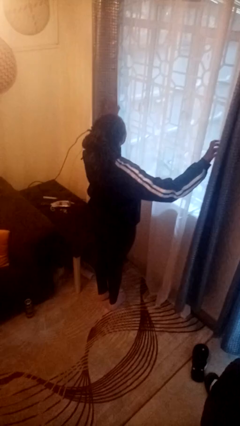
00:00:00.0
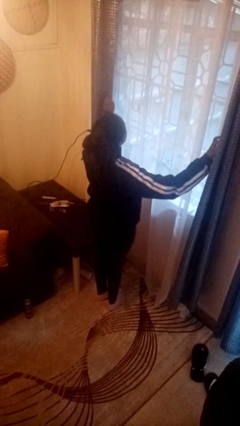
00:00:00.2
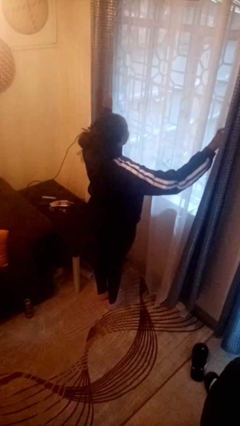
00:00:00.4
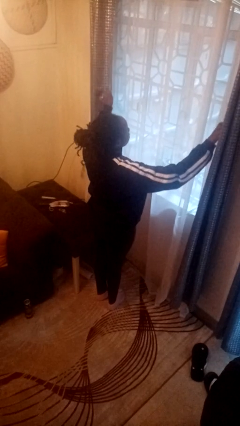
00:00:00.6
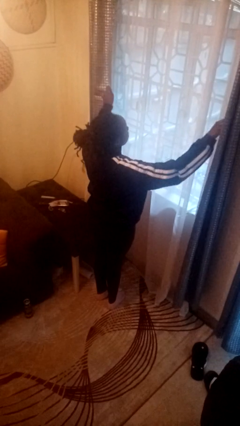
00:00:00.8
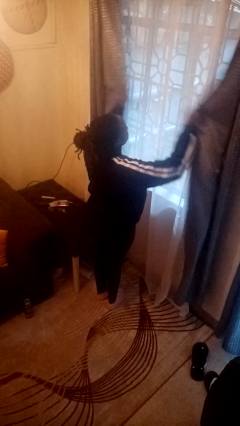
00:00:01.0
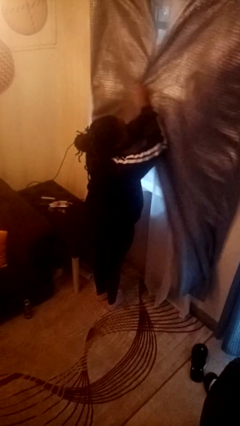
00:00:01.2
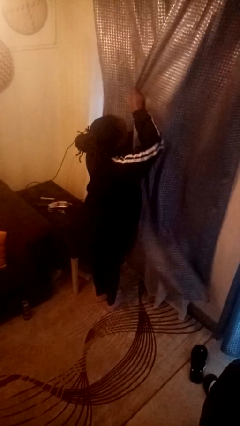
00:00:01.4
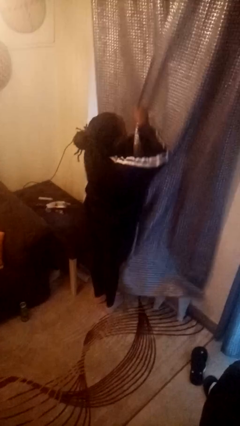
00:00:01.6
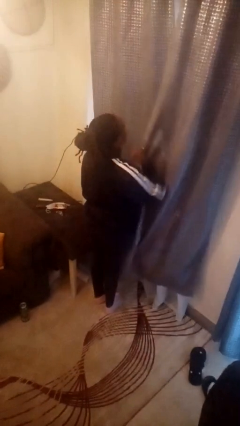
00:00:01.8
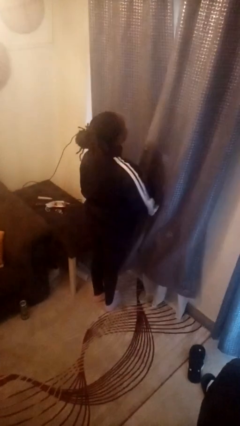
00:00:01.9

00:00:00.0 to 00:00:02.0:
person closes curtains

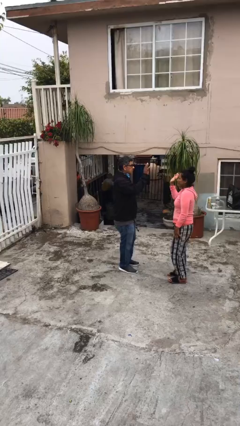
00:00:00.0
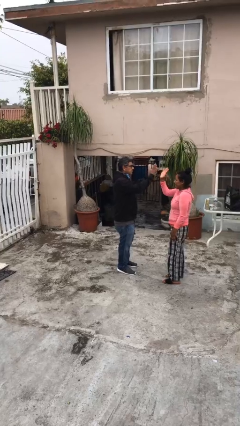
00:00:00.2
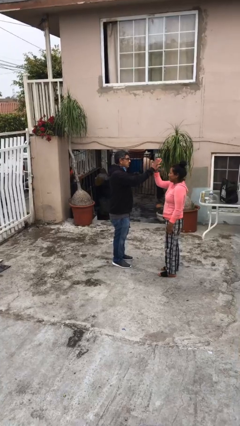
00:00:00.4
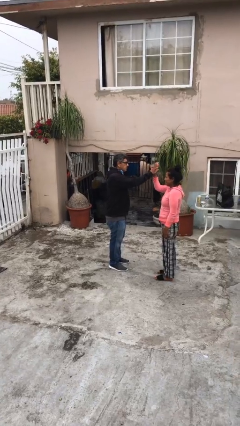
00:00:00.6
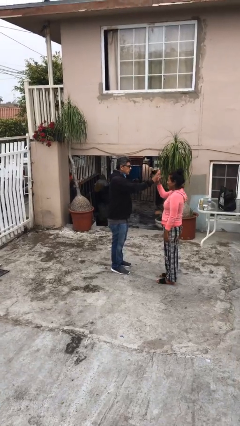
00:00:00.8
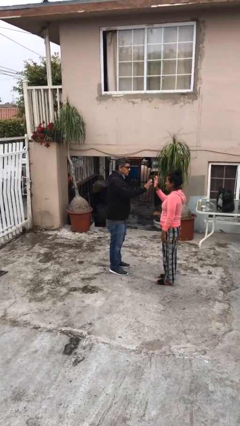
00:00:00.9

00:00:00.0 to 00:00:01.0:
person highfives hand

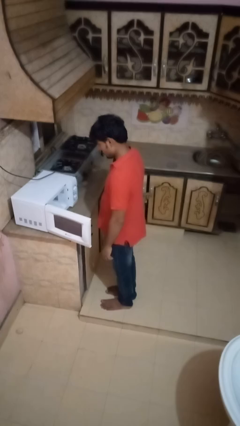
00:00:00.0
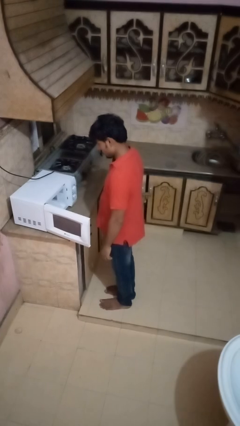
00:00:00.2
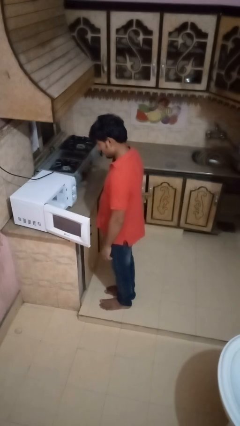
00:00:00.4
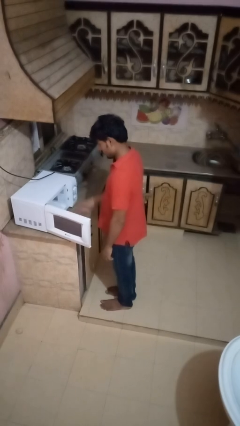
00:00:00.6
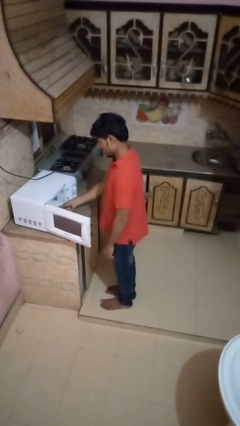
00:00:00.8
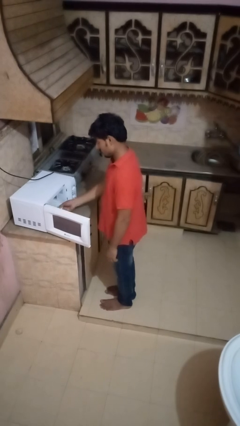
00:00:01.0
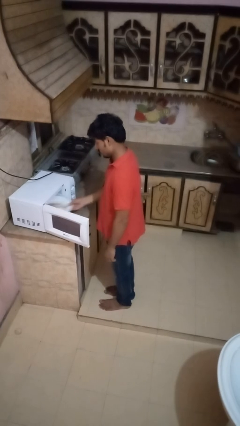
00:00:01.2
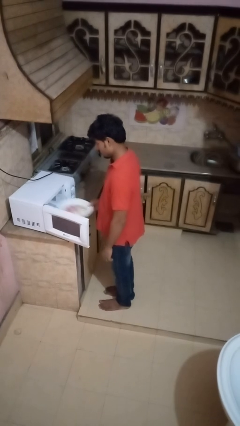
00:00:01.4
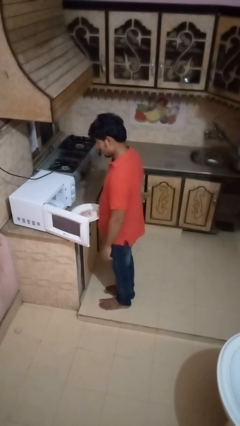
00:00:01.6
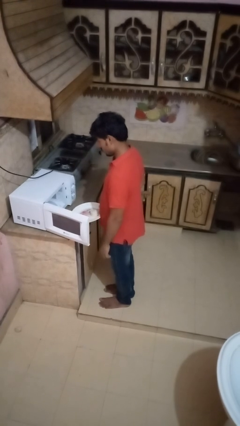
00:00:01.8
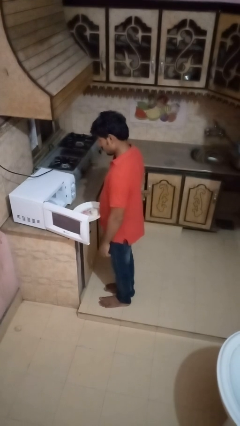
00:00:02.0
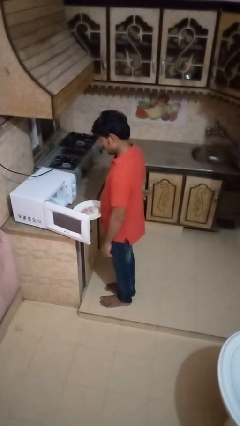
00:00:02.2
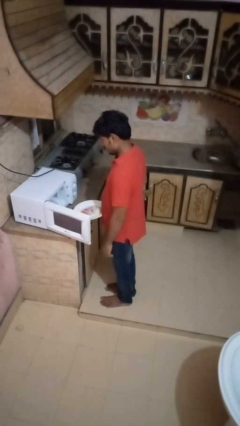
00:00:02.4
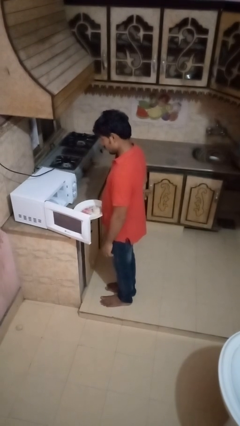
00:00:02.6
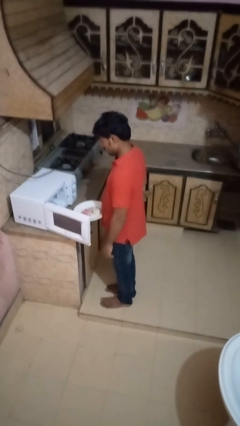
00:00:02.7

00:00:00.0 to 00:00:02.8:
person takes object from oven

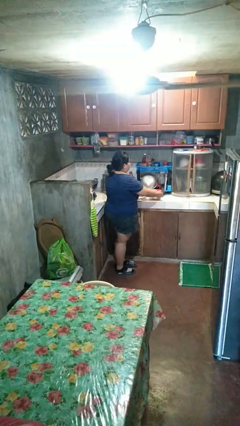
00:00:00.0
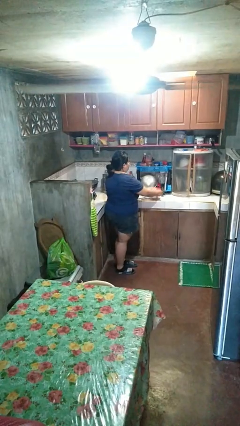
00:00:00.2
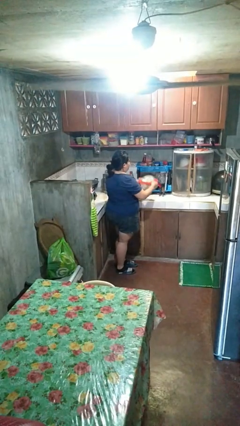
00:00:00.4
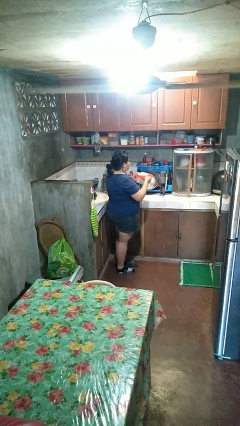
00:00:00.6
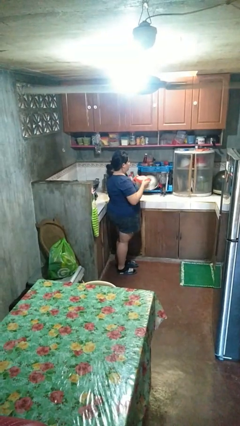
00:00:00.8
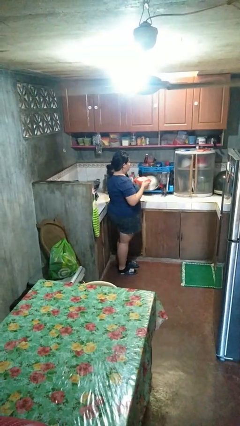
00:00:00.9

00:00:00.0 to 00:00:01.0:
person picks up object from countertop

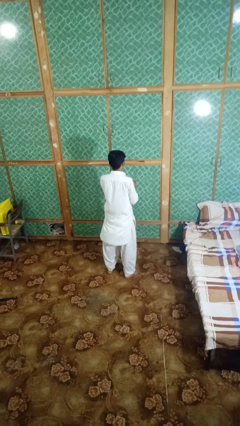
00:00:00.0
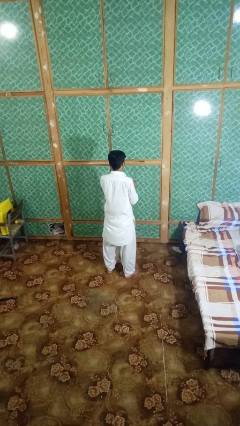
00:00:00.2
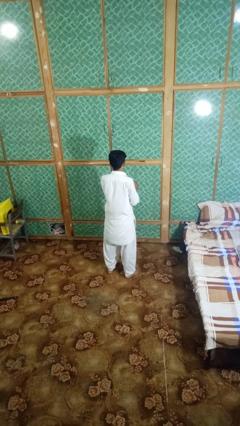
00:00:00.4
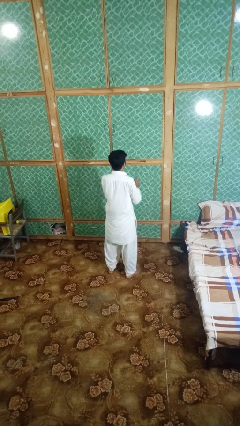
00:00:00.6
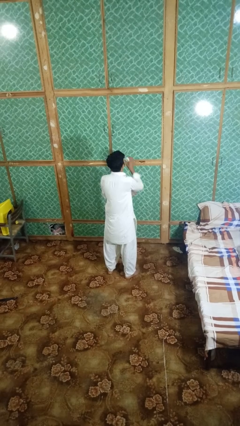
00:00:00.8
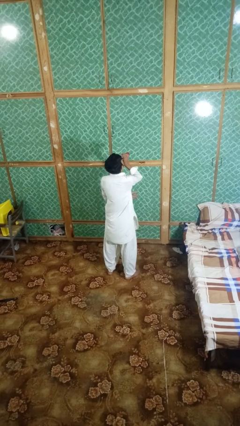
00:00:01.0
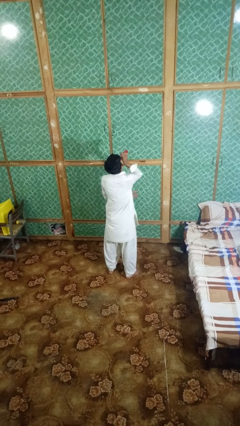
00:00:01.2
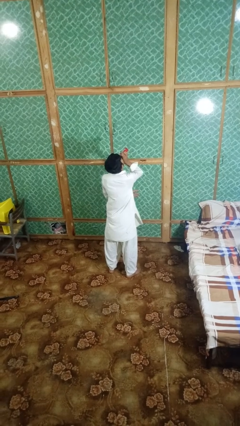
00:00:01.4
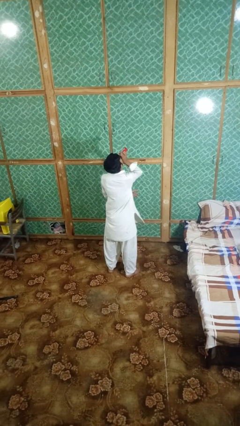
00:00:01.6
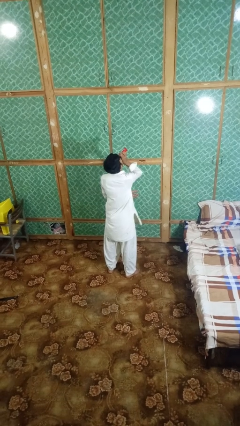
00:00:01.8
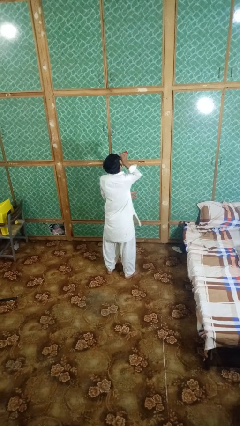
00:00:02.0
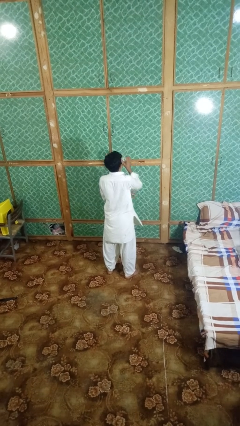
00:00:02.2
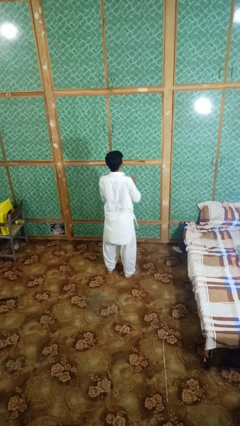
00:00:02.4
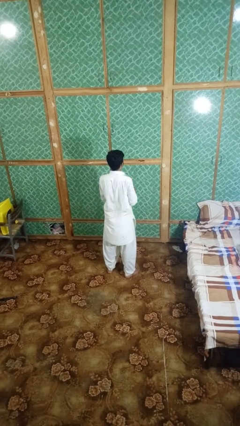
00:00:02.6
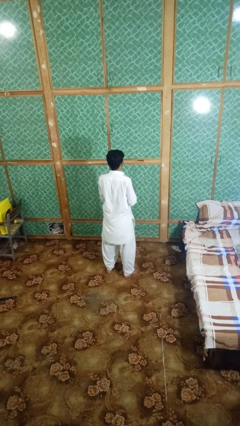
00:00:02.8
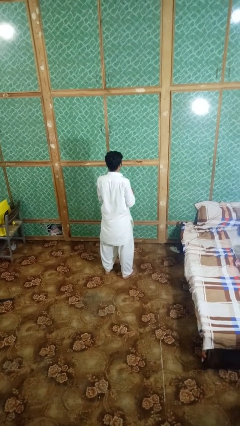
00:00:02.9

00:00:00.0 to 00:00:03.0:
person drinks from beverage can

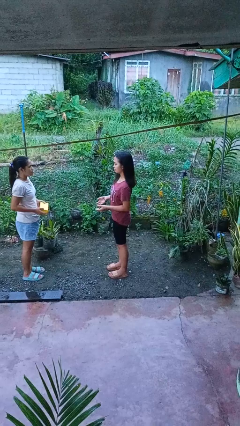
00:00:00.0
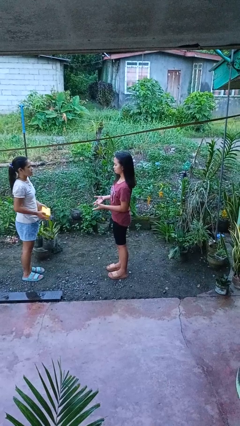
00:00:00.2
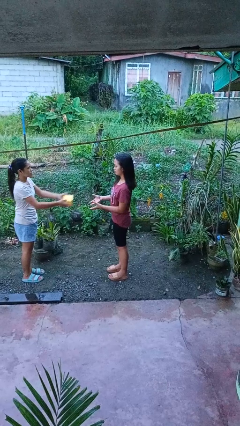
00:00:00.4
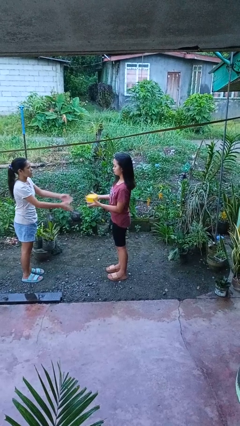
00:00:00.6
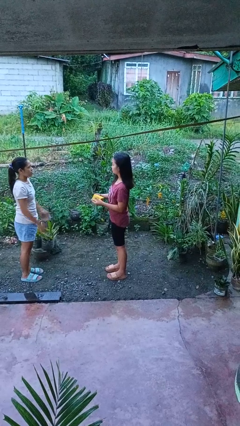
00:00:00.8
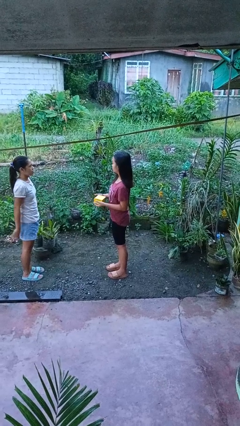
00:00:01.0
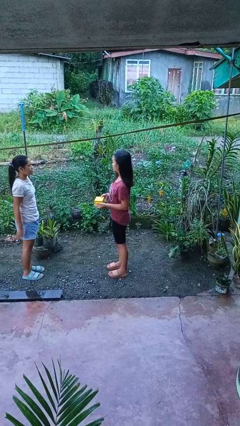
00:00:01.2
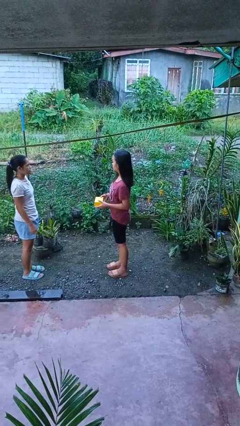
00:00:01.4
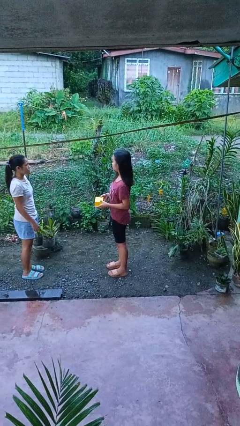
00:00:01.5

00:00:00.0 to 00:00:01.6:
person catches object from person

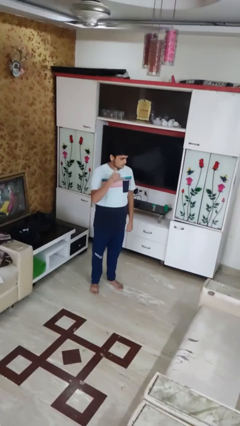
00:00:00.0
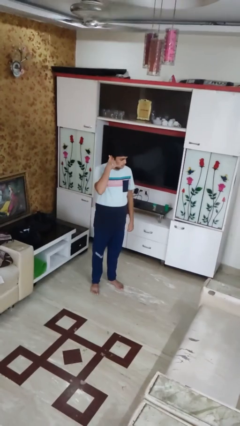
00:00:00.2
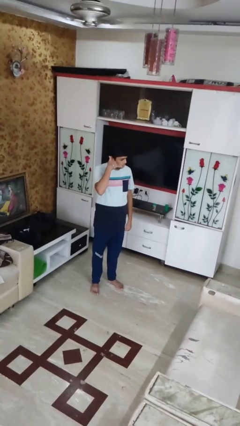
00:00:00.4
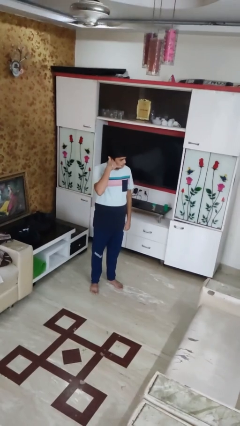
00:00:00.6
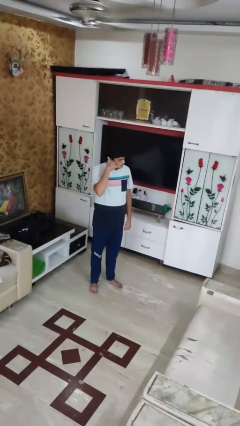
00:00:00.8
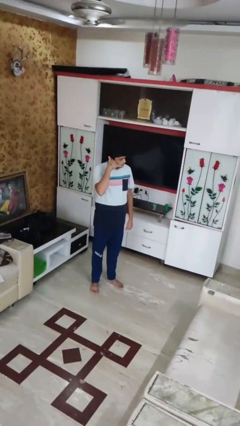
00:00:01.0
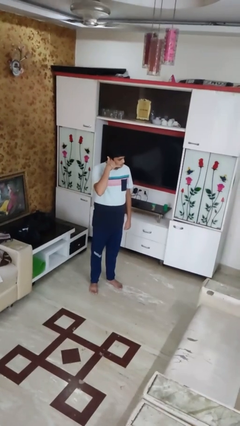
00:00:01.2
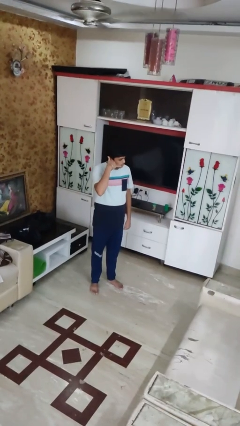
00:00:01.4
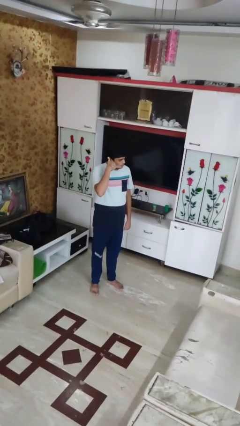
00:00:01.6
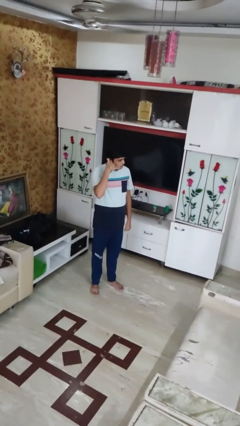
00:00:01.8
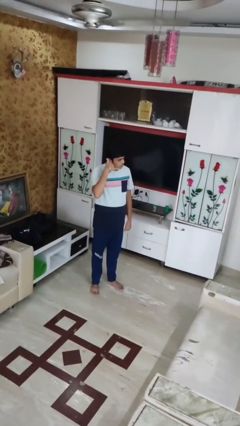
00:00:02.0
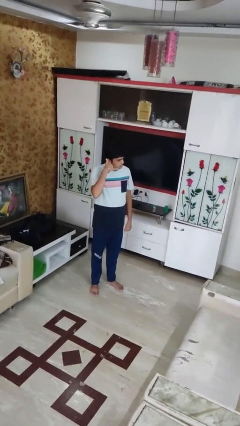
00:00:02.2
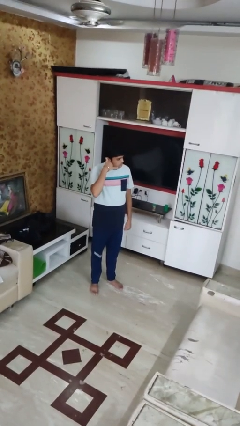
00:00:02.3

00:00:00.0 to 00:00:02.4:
person gestures call me

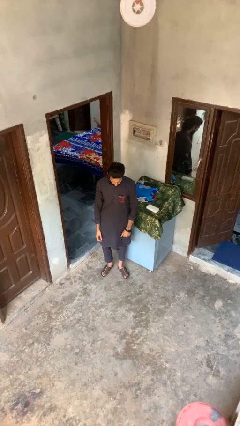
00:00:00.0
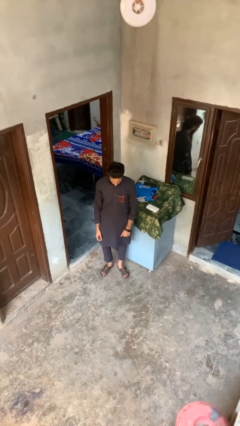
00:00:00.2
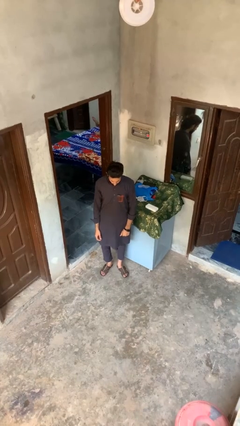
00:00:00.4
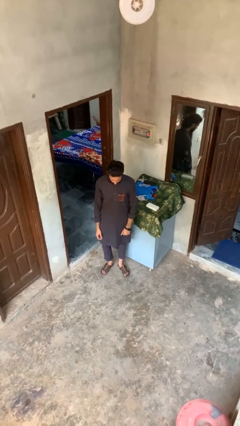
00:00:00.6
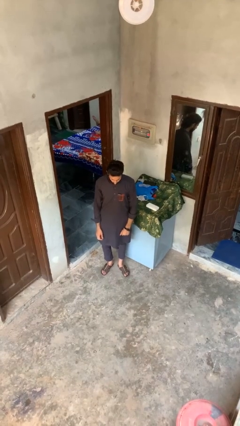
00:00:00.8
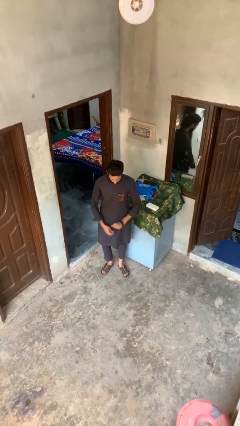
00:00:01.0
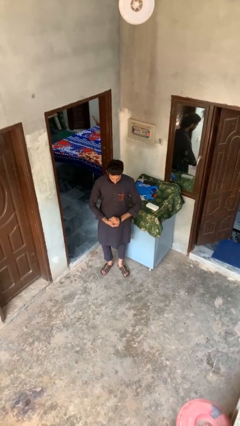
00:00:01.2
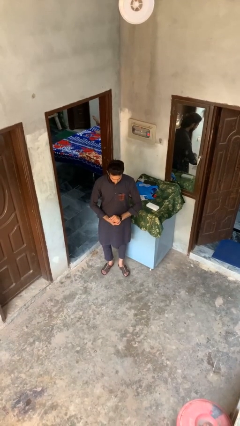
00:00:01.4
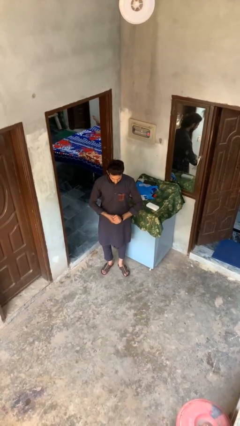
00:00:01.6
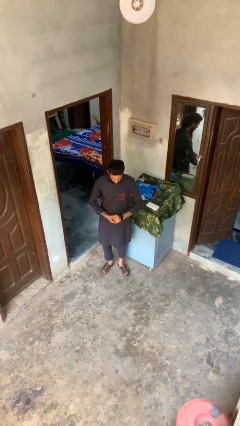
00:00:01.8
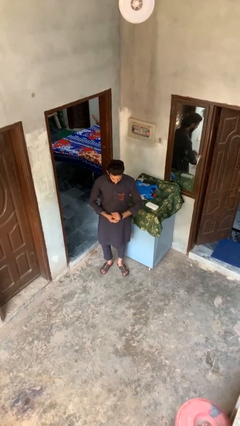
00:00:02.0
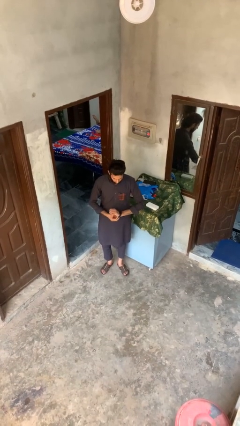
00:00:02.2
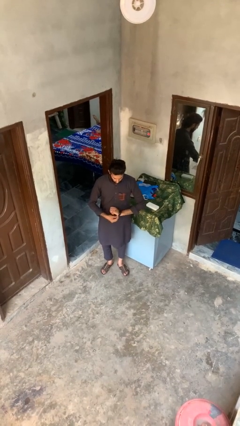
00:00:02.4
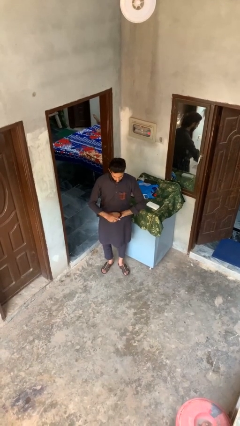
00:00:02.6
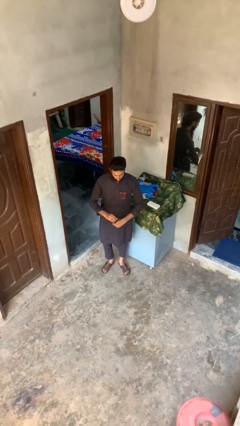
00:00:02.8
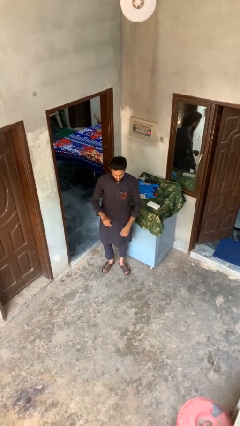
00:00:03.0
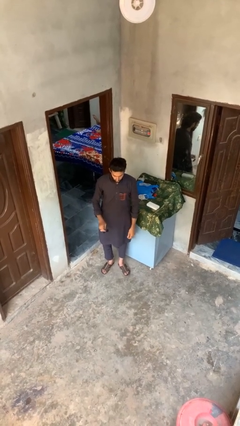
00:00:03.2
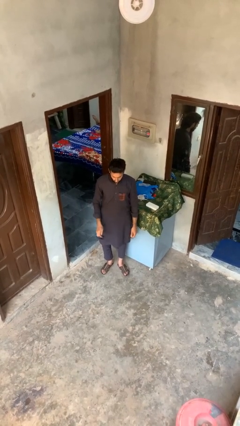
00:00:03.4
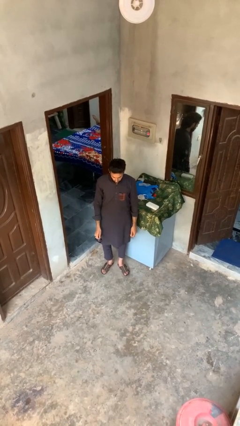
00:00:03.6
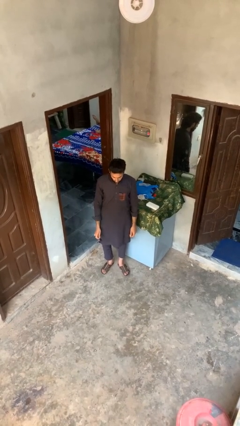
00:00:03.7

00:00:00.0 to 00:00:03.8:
person takes off wristwatch
